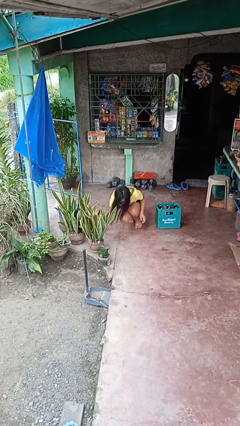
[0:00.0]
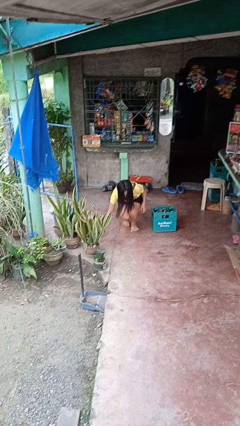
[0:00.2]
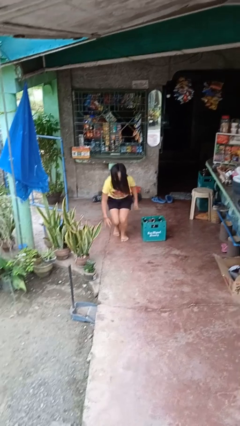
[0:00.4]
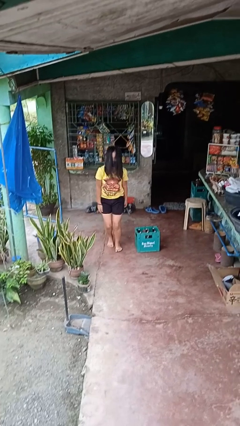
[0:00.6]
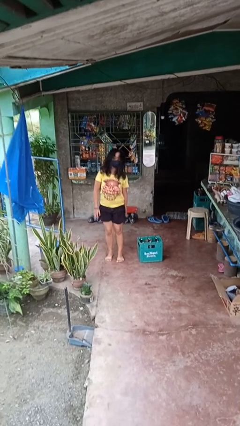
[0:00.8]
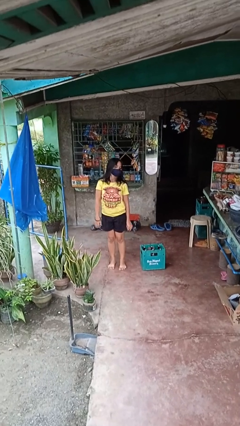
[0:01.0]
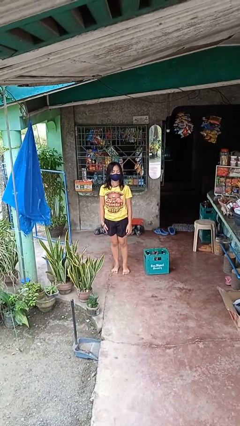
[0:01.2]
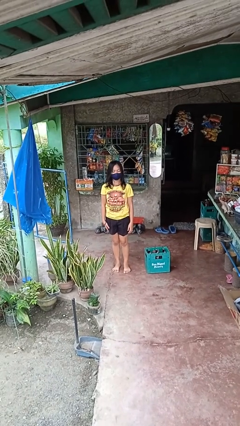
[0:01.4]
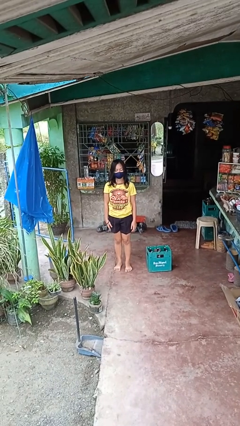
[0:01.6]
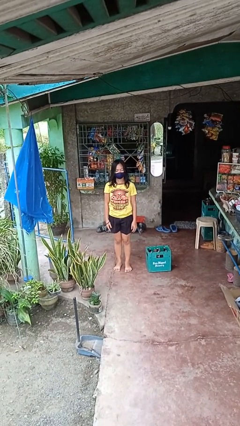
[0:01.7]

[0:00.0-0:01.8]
person stands up from floor

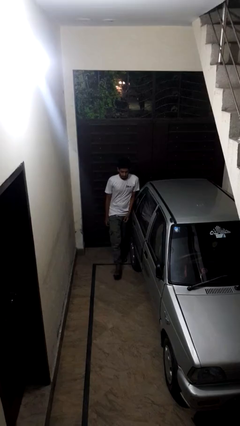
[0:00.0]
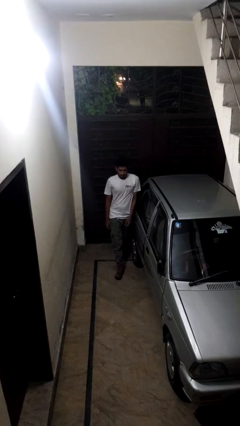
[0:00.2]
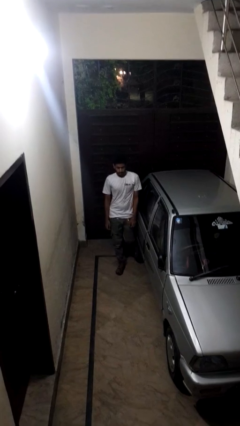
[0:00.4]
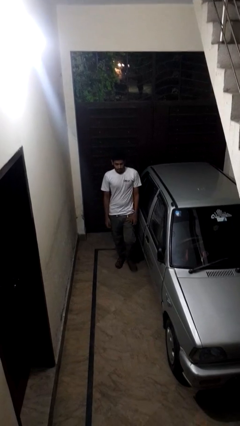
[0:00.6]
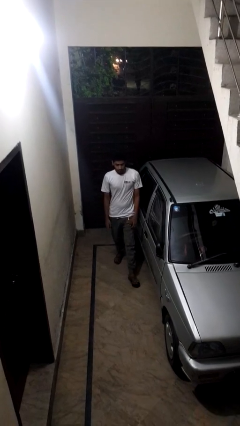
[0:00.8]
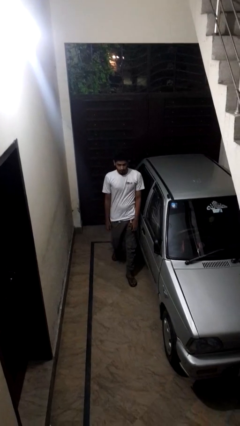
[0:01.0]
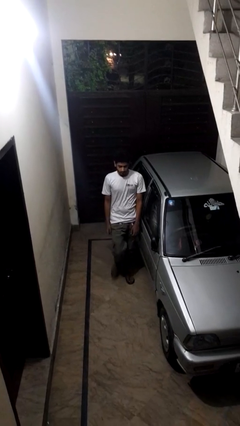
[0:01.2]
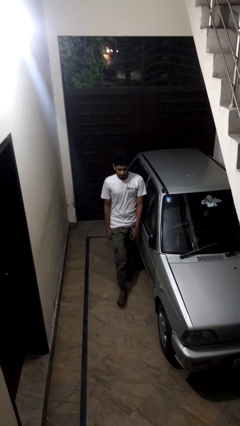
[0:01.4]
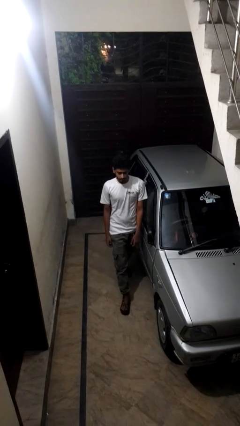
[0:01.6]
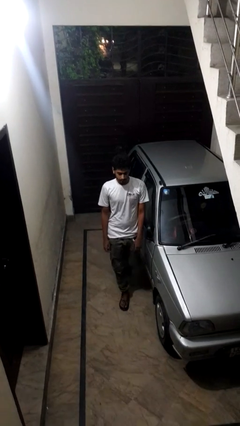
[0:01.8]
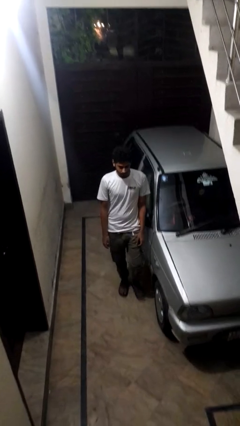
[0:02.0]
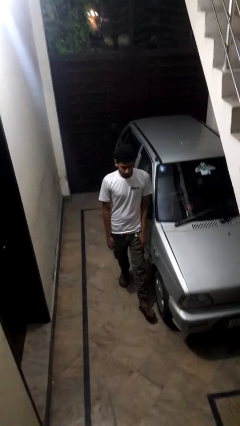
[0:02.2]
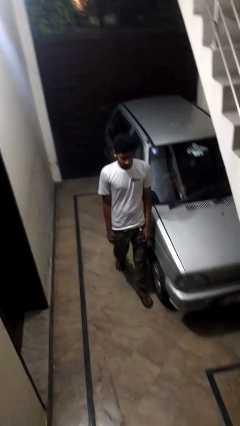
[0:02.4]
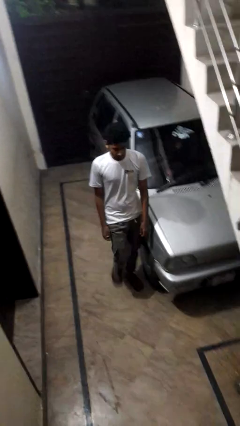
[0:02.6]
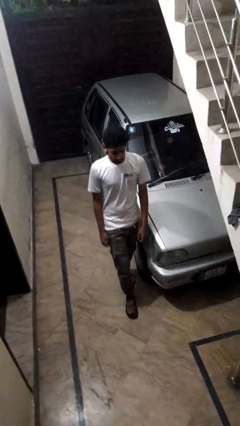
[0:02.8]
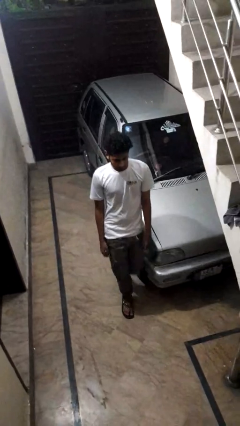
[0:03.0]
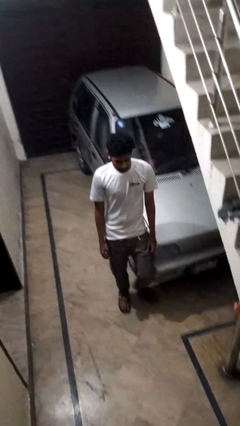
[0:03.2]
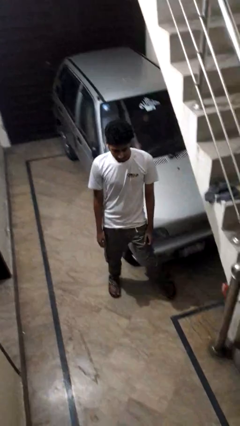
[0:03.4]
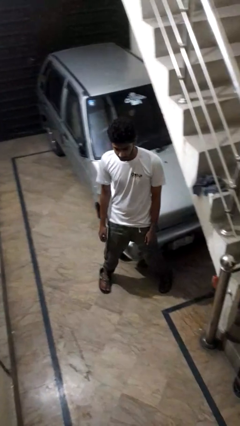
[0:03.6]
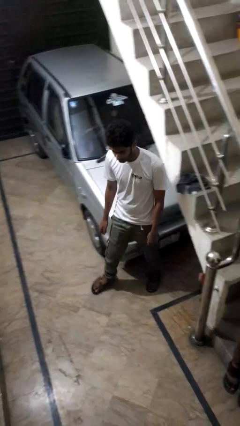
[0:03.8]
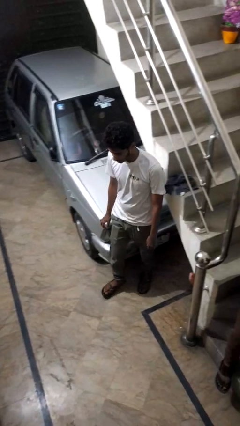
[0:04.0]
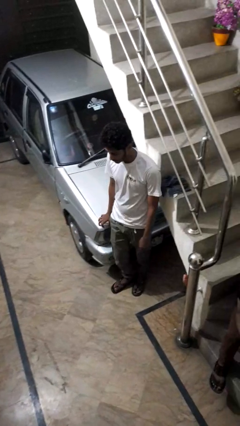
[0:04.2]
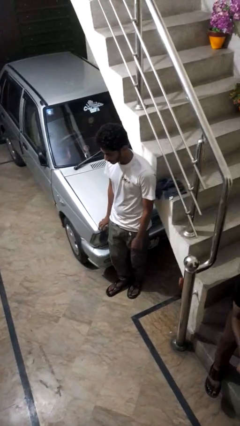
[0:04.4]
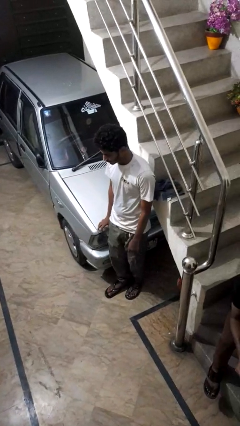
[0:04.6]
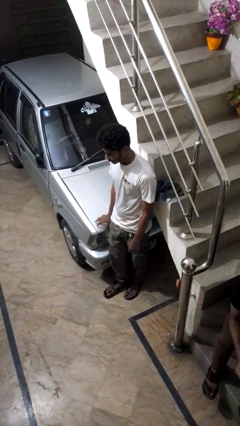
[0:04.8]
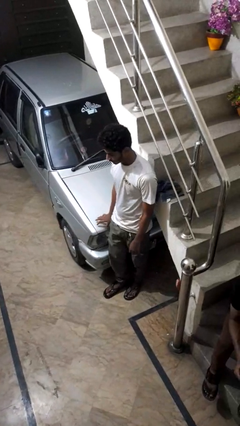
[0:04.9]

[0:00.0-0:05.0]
person walks around car

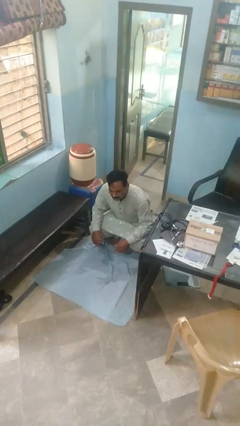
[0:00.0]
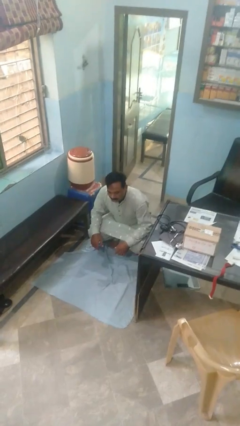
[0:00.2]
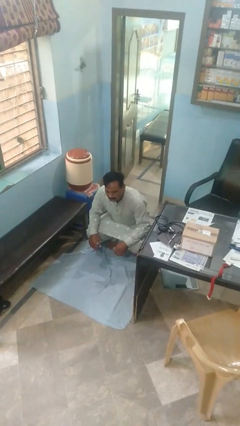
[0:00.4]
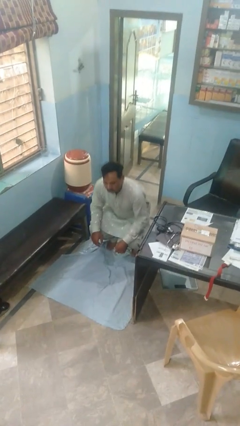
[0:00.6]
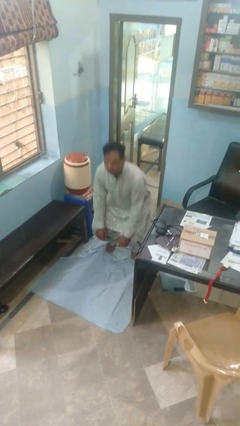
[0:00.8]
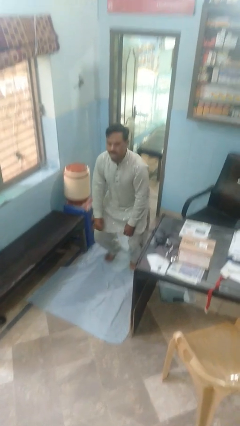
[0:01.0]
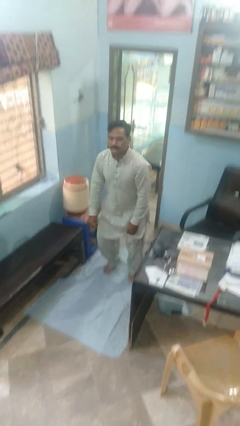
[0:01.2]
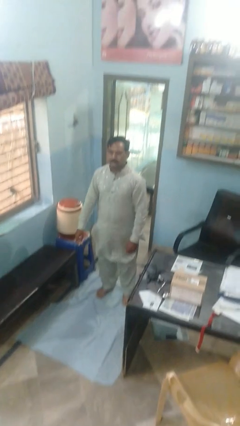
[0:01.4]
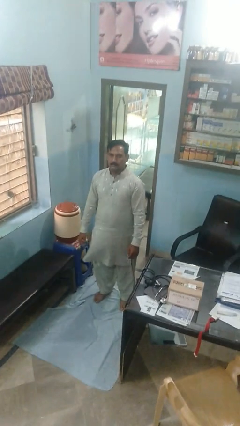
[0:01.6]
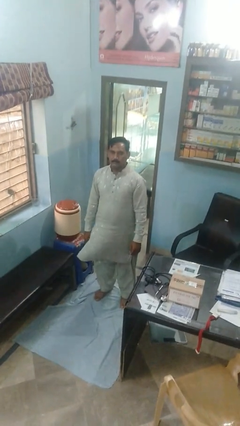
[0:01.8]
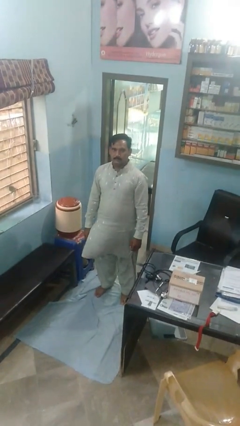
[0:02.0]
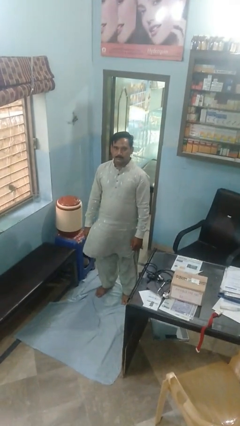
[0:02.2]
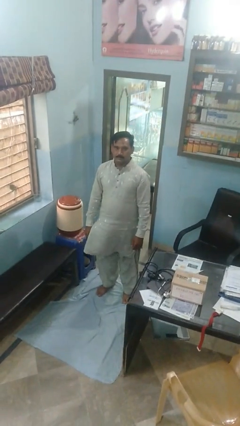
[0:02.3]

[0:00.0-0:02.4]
person stands up

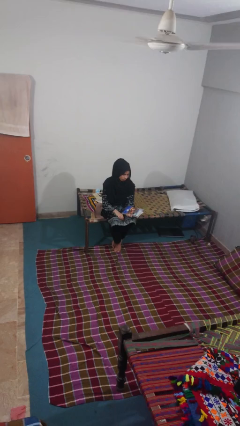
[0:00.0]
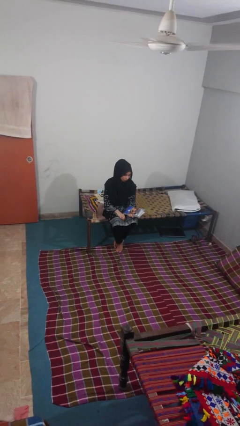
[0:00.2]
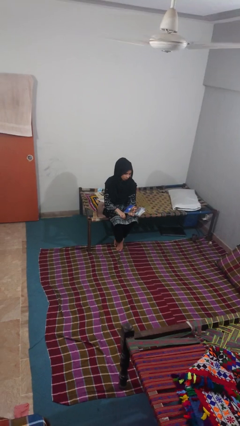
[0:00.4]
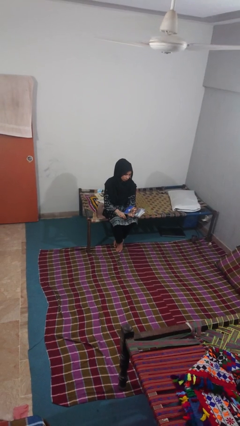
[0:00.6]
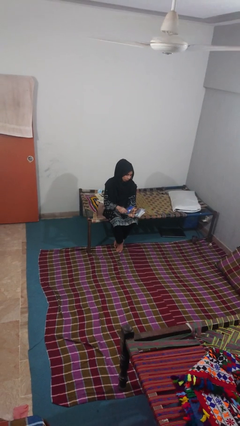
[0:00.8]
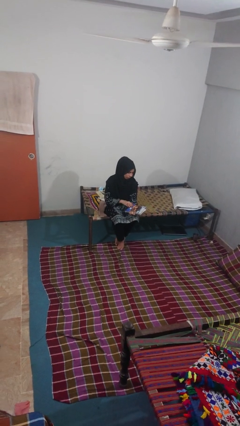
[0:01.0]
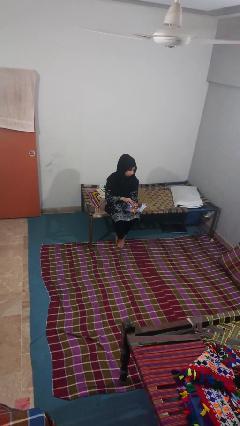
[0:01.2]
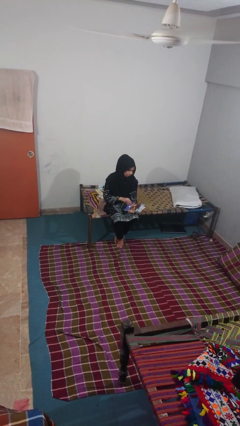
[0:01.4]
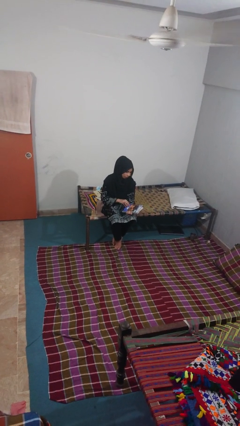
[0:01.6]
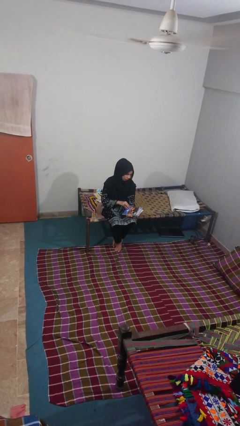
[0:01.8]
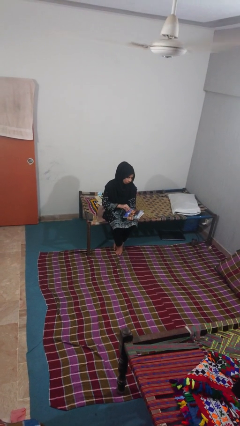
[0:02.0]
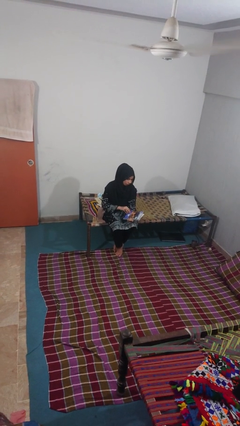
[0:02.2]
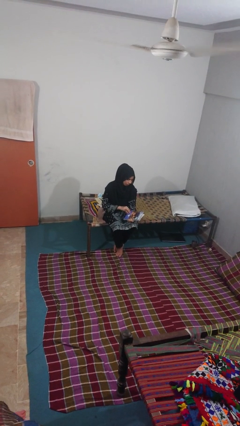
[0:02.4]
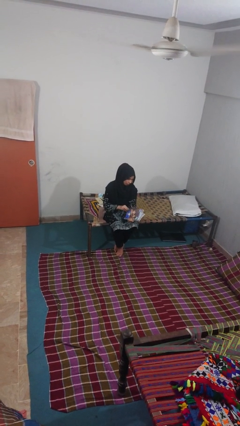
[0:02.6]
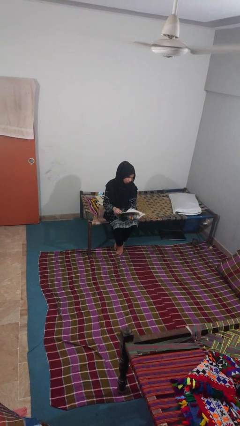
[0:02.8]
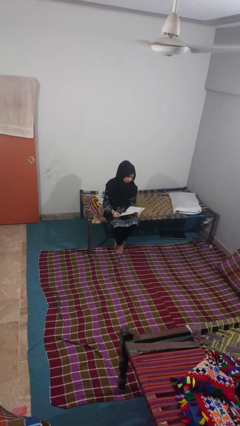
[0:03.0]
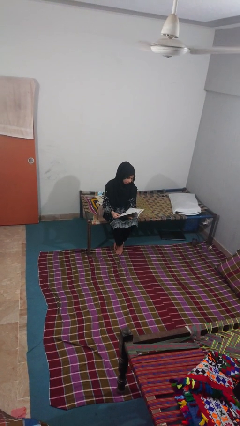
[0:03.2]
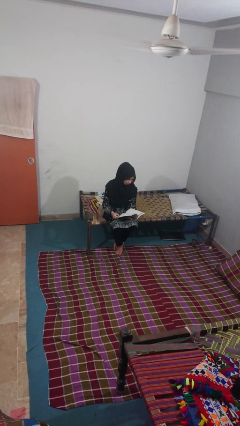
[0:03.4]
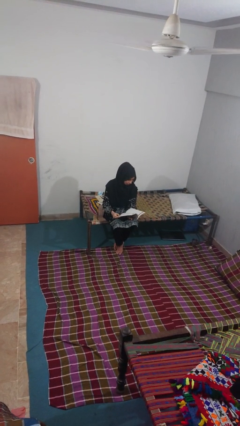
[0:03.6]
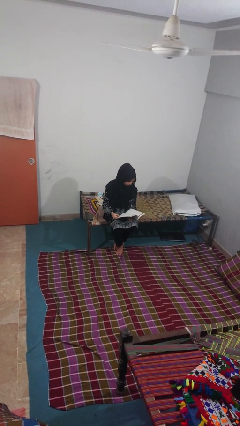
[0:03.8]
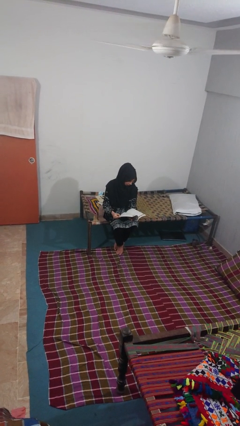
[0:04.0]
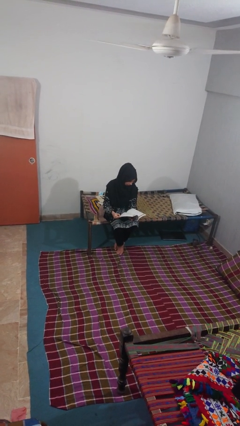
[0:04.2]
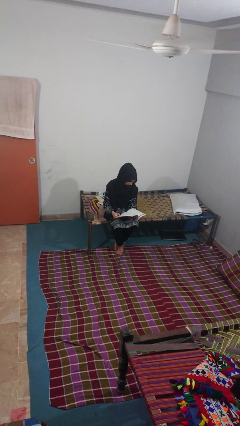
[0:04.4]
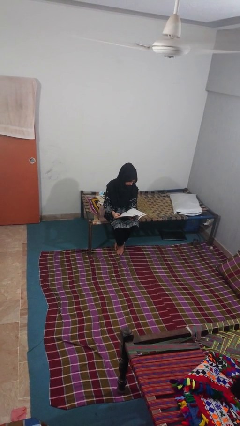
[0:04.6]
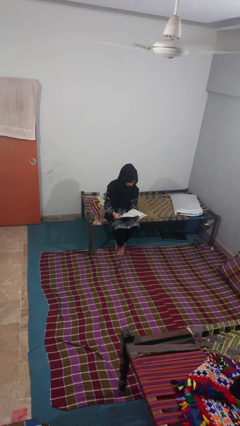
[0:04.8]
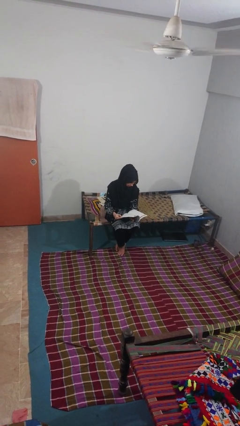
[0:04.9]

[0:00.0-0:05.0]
person reads book

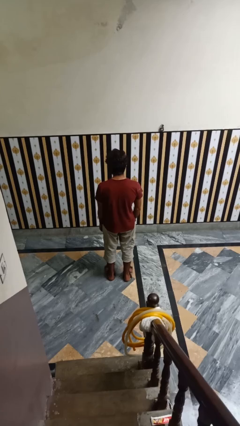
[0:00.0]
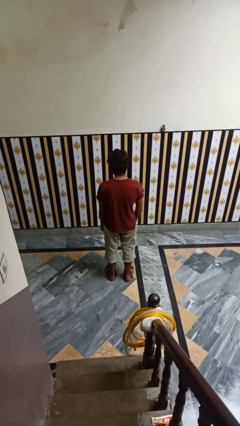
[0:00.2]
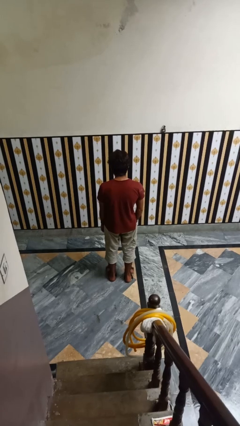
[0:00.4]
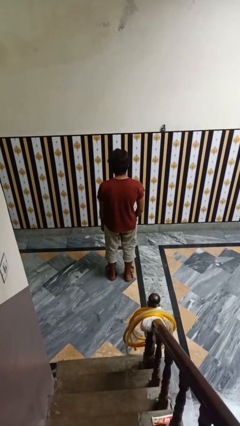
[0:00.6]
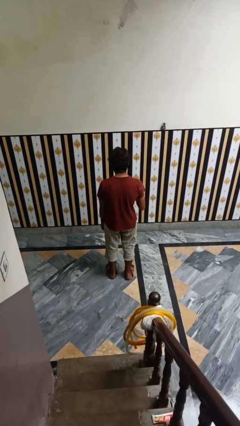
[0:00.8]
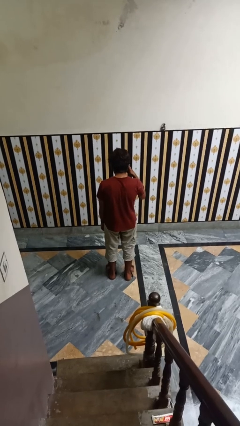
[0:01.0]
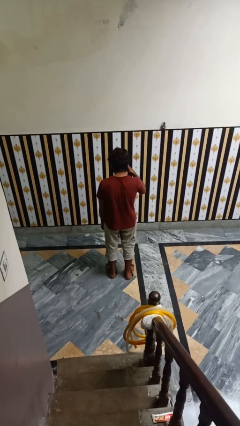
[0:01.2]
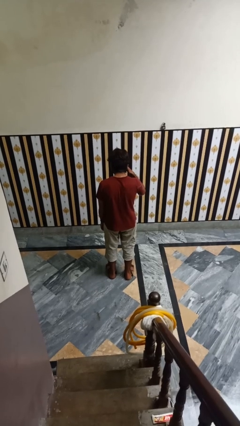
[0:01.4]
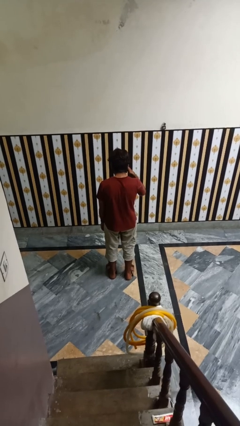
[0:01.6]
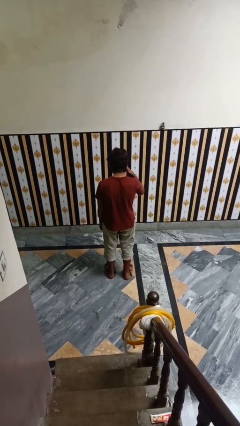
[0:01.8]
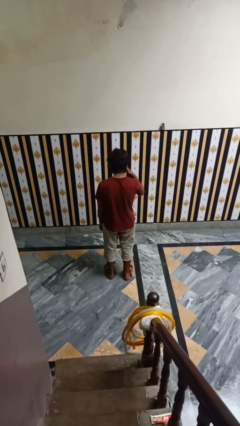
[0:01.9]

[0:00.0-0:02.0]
person gestures call me

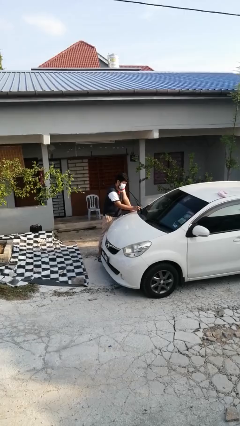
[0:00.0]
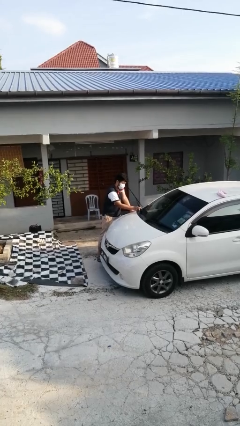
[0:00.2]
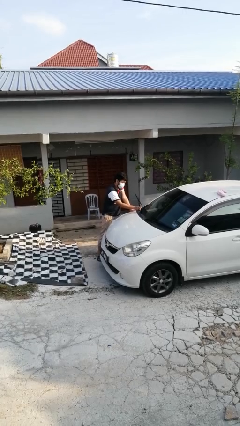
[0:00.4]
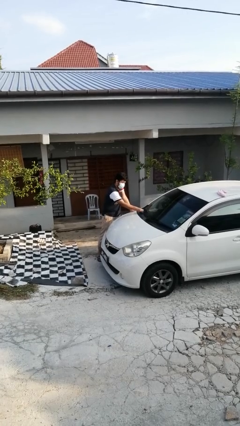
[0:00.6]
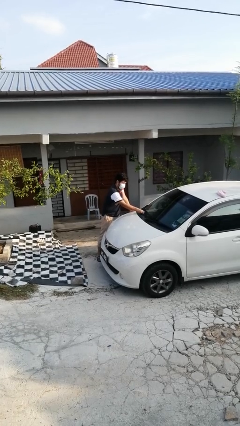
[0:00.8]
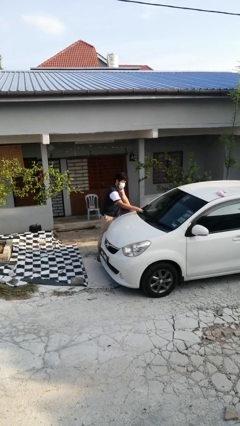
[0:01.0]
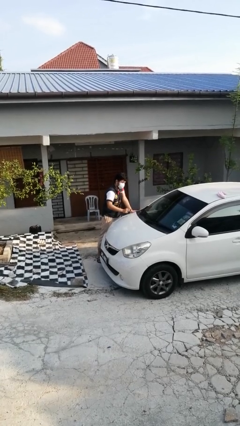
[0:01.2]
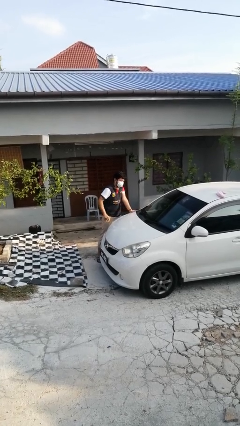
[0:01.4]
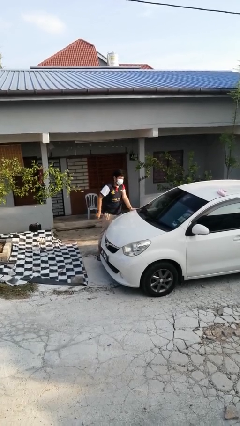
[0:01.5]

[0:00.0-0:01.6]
person flips down car wipers
